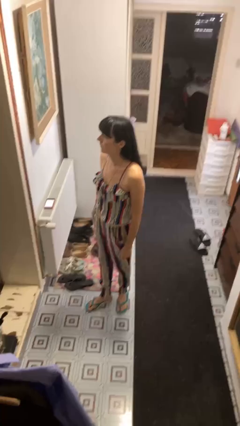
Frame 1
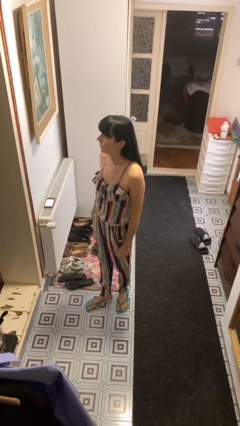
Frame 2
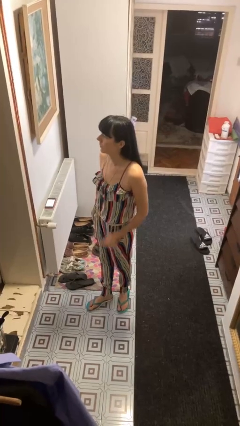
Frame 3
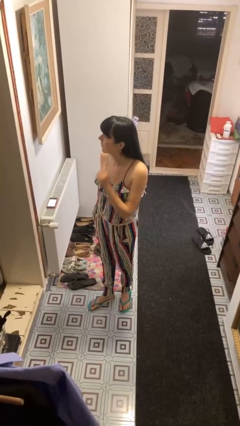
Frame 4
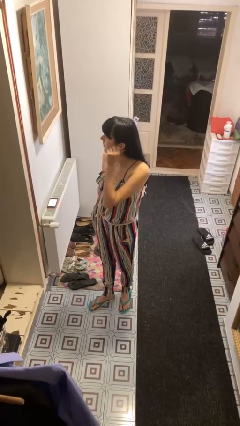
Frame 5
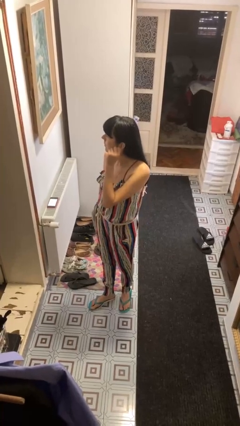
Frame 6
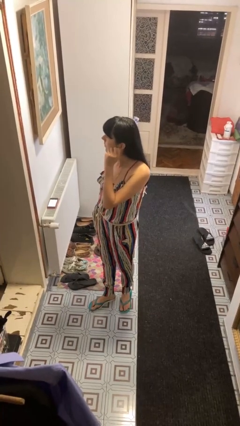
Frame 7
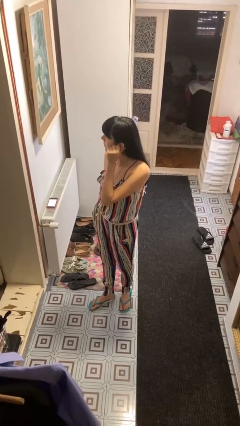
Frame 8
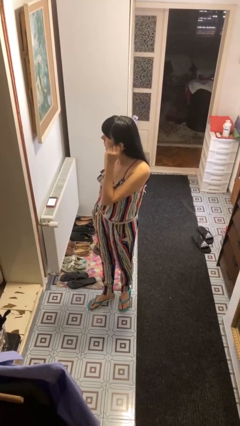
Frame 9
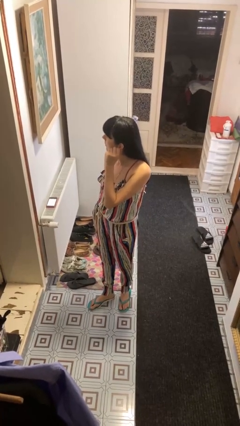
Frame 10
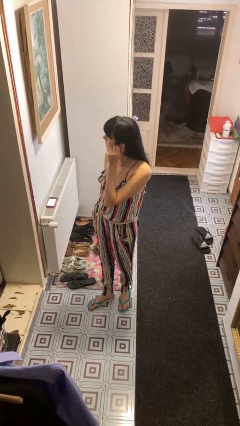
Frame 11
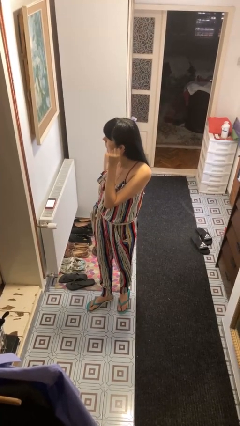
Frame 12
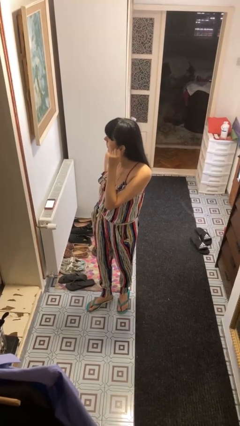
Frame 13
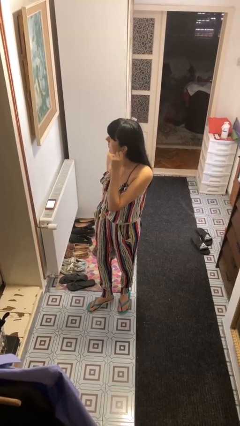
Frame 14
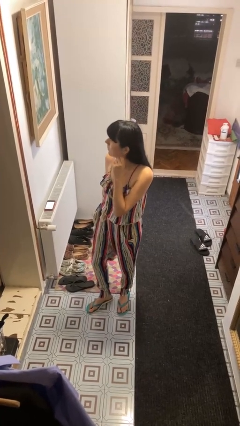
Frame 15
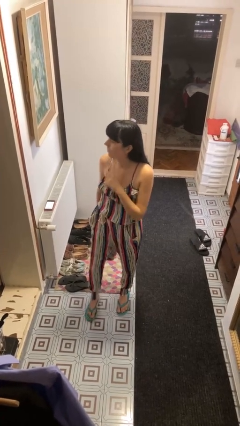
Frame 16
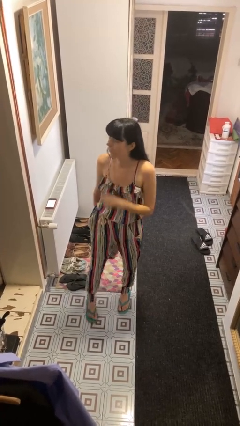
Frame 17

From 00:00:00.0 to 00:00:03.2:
person touches earlobe

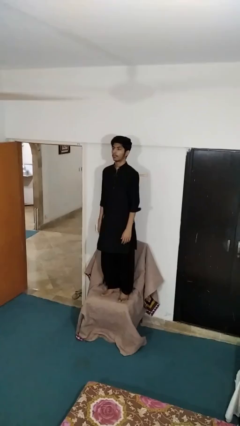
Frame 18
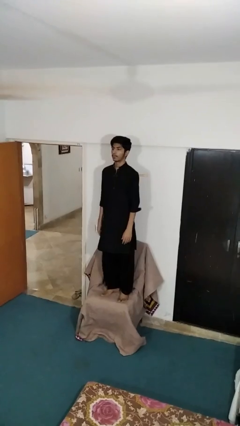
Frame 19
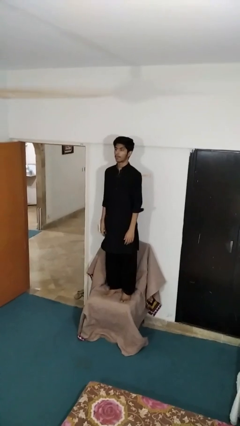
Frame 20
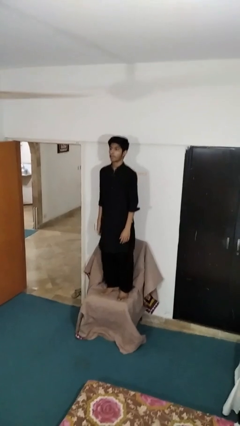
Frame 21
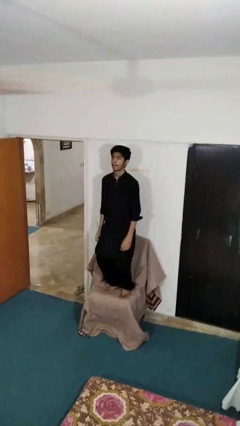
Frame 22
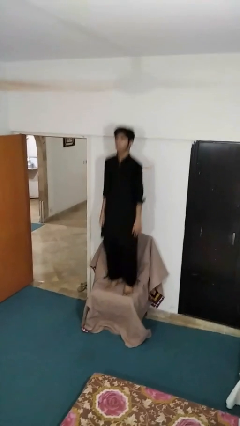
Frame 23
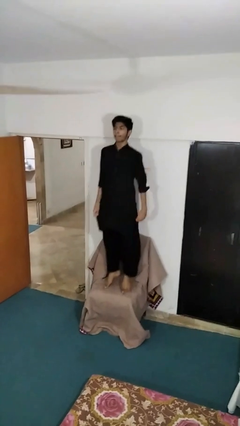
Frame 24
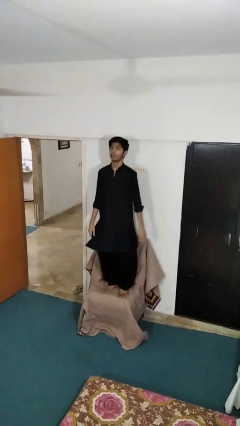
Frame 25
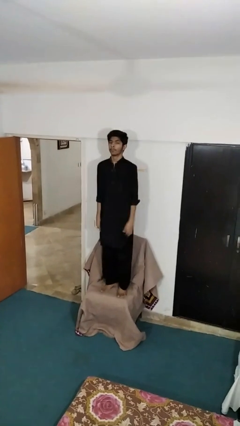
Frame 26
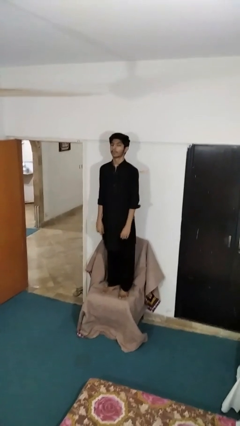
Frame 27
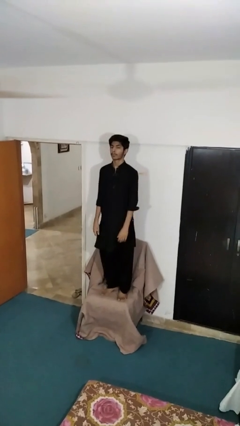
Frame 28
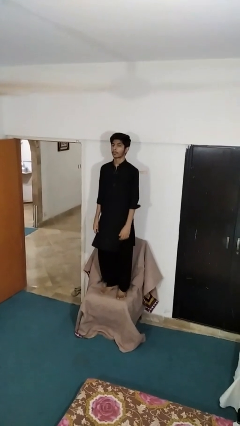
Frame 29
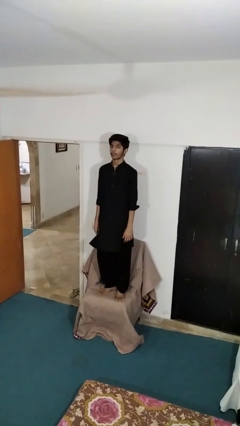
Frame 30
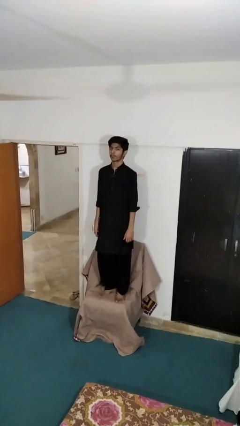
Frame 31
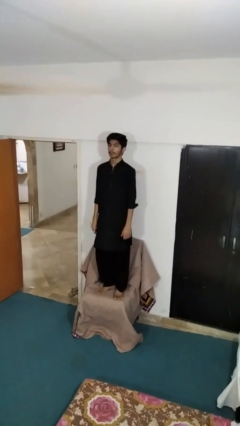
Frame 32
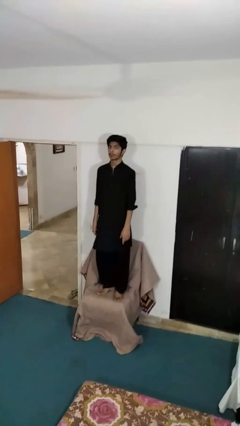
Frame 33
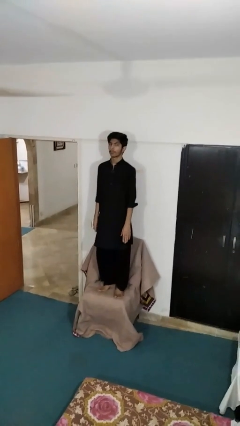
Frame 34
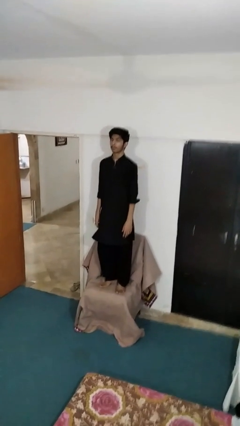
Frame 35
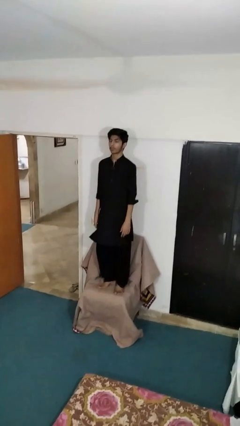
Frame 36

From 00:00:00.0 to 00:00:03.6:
person jumps on couch

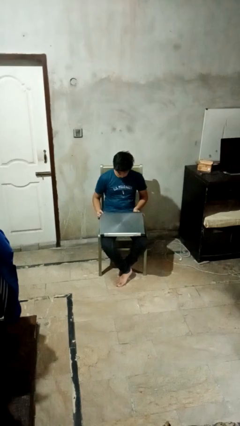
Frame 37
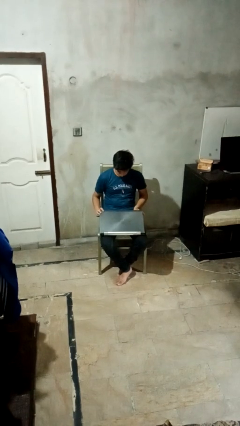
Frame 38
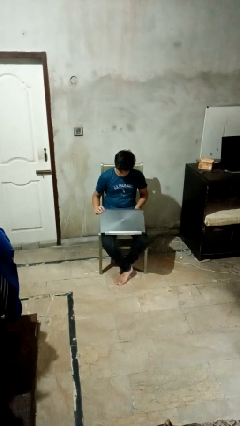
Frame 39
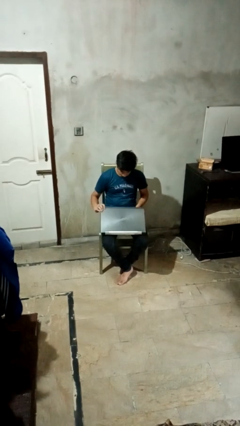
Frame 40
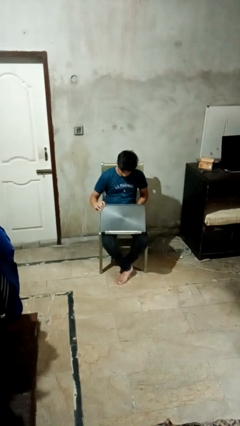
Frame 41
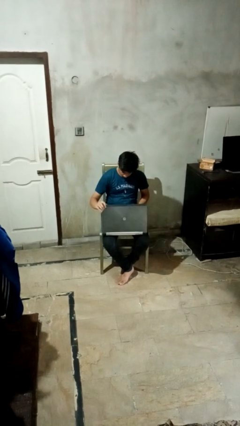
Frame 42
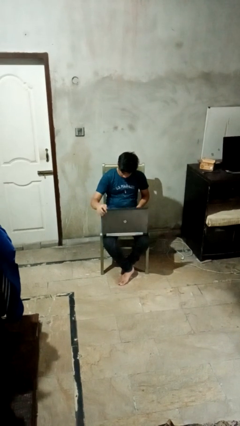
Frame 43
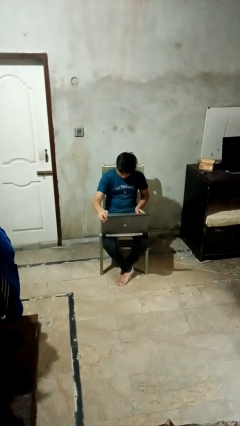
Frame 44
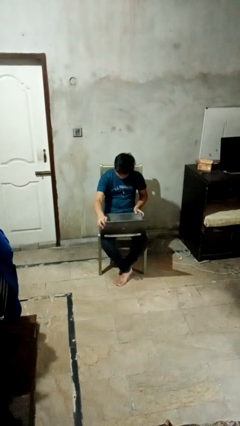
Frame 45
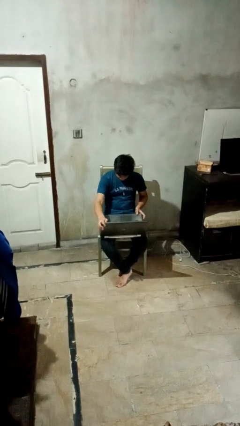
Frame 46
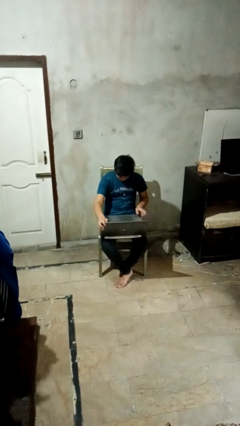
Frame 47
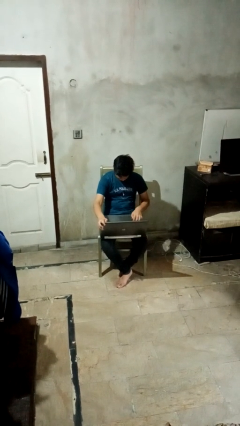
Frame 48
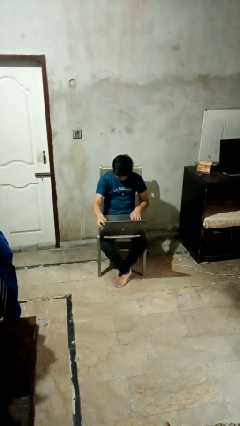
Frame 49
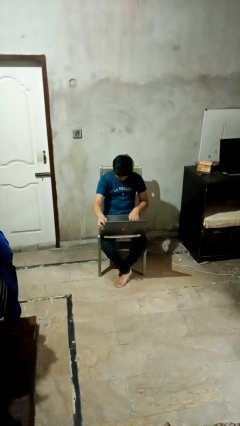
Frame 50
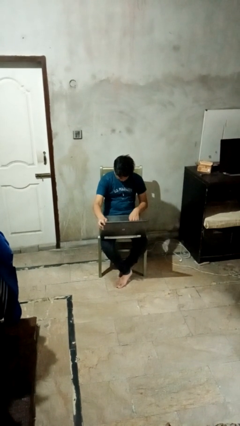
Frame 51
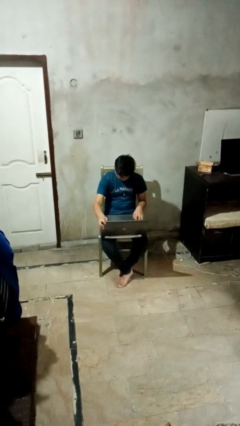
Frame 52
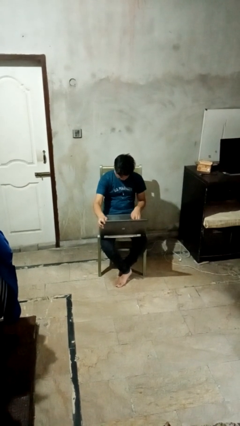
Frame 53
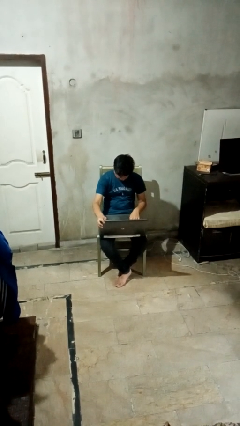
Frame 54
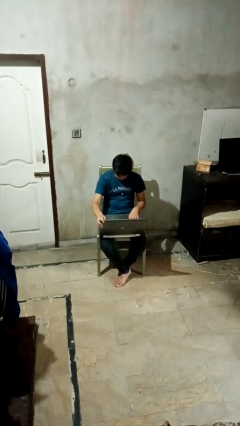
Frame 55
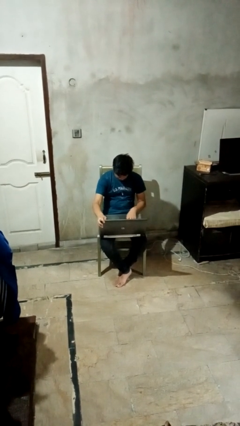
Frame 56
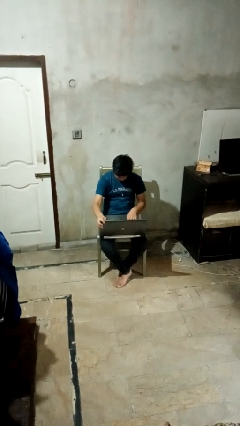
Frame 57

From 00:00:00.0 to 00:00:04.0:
person opens laptop

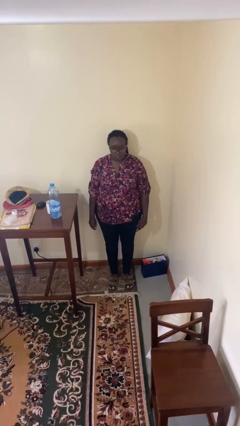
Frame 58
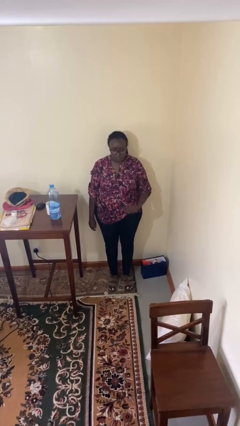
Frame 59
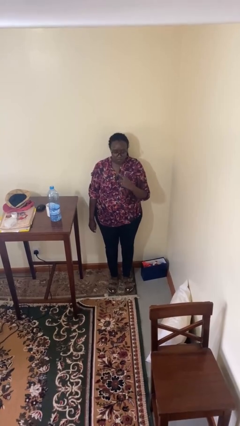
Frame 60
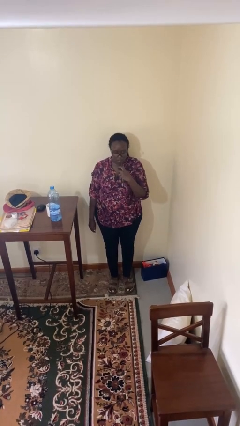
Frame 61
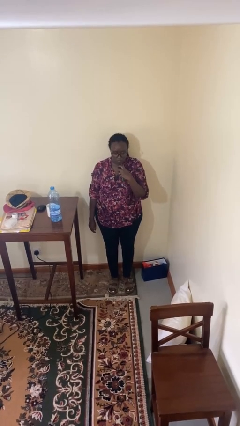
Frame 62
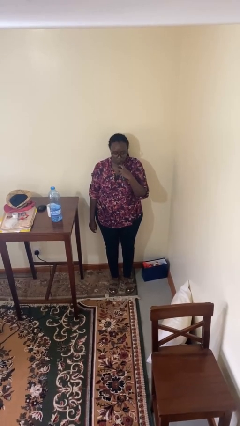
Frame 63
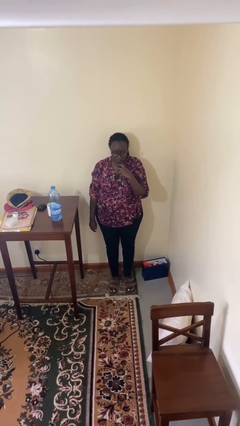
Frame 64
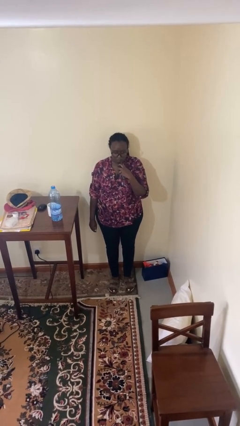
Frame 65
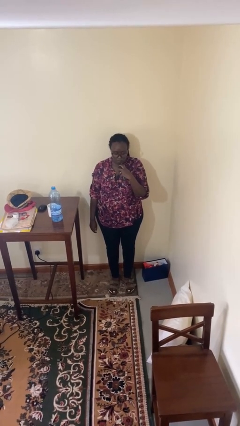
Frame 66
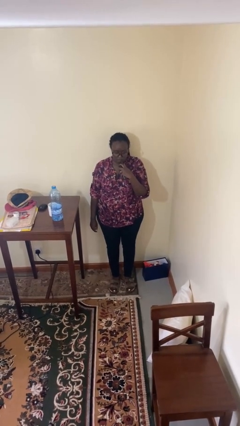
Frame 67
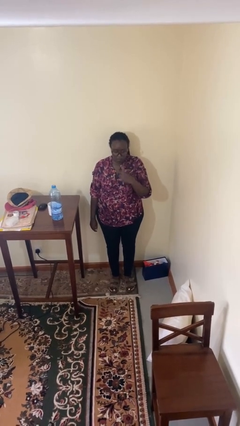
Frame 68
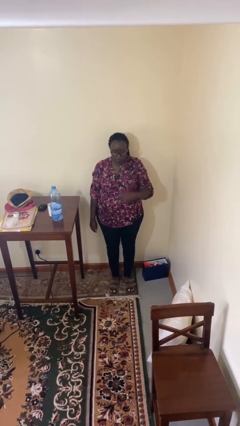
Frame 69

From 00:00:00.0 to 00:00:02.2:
person vapes

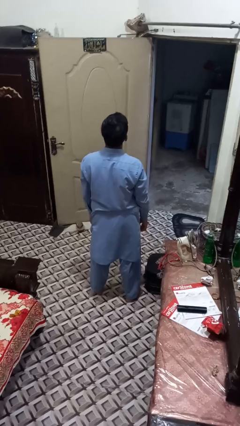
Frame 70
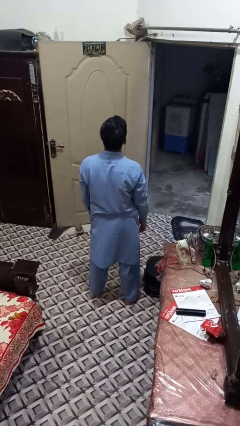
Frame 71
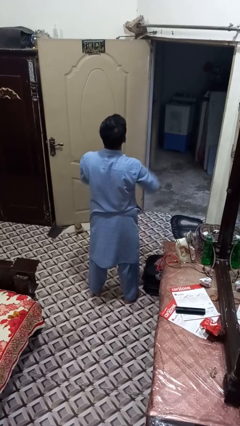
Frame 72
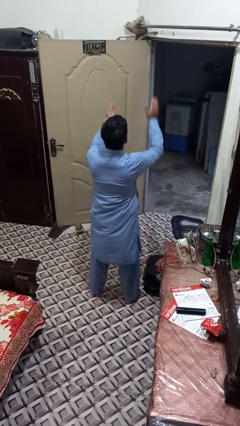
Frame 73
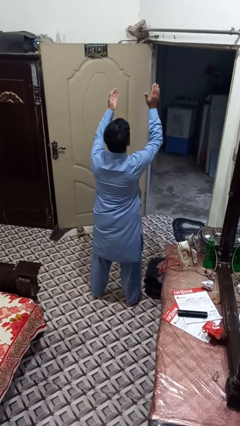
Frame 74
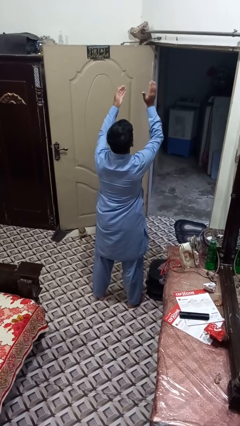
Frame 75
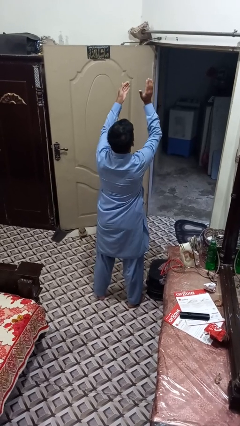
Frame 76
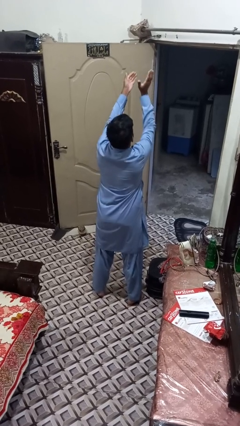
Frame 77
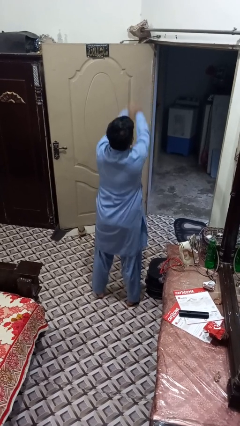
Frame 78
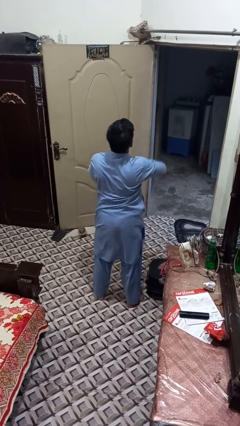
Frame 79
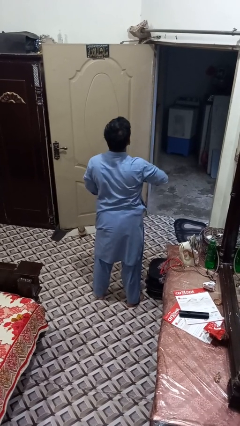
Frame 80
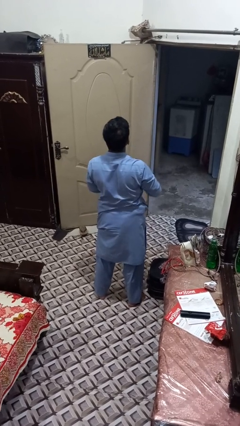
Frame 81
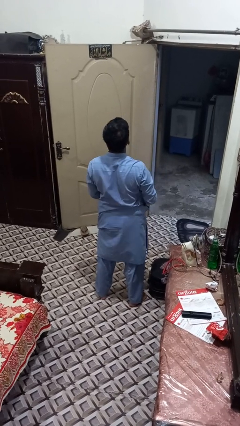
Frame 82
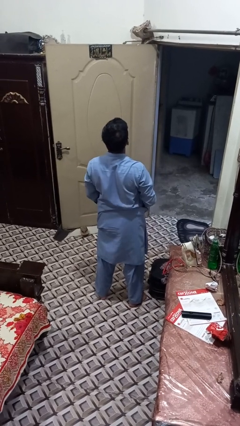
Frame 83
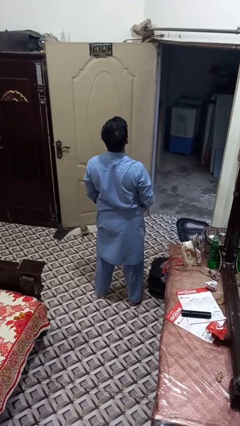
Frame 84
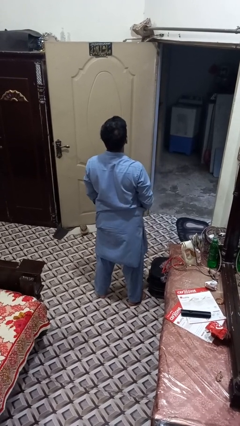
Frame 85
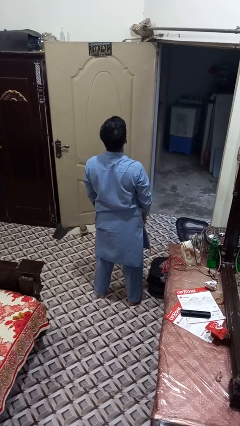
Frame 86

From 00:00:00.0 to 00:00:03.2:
person swats bug

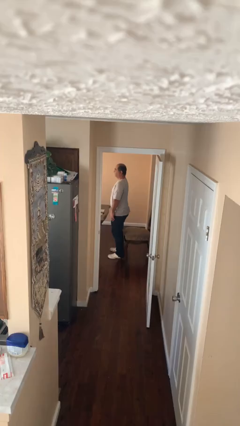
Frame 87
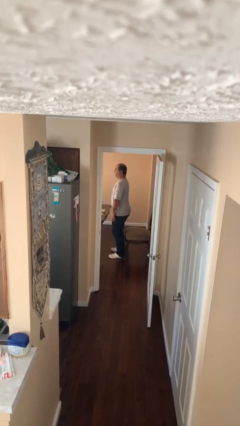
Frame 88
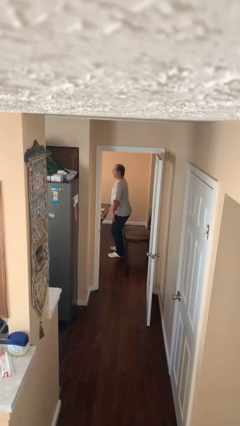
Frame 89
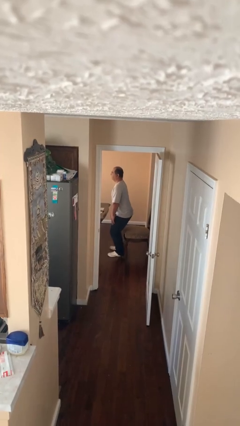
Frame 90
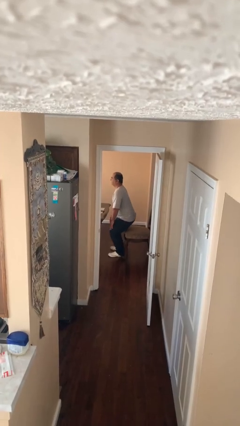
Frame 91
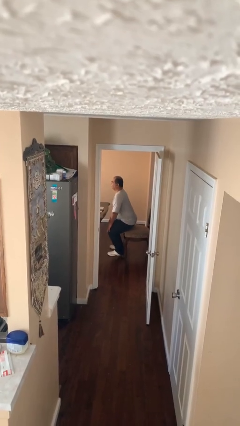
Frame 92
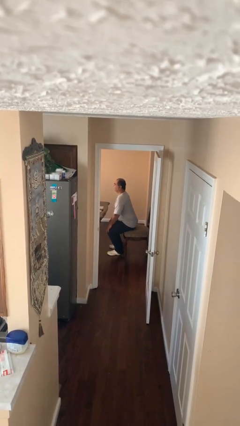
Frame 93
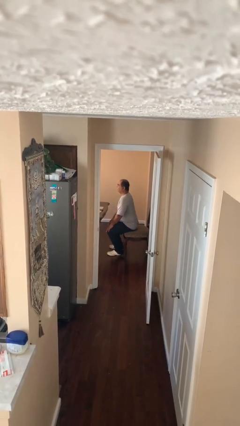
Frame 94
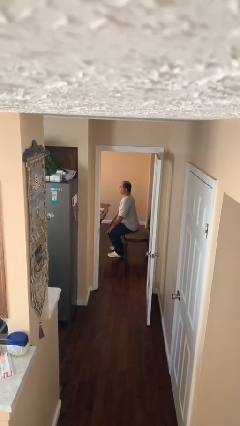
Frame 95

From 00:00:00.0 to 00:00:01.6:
person sits down
